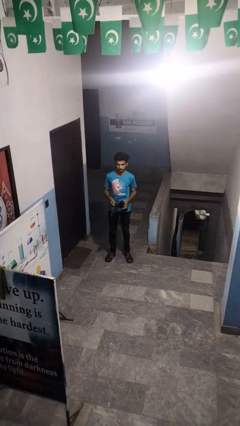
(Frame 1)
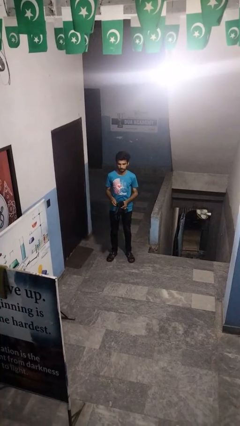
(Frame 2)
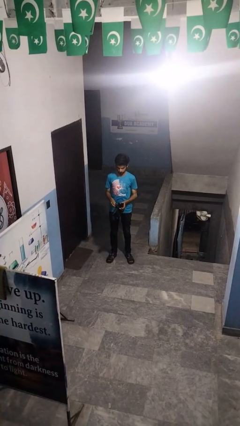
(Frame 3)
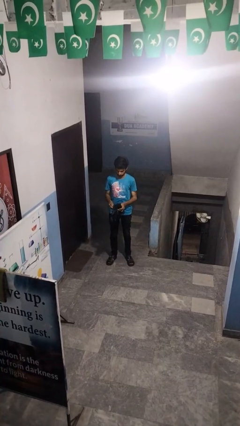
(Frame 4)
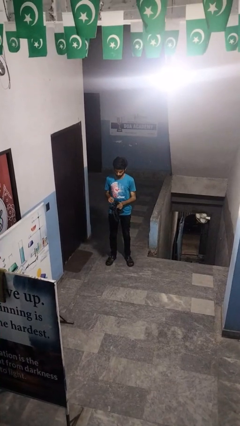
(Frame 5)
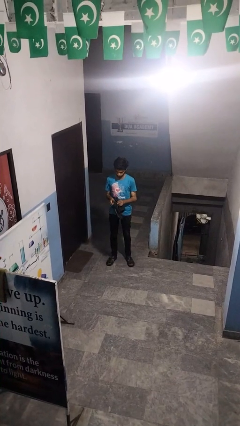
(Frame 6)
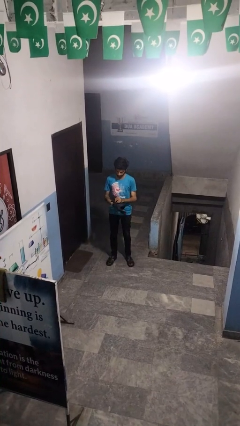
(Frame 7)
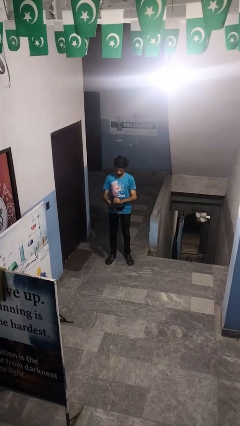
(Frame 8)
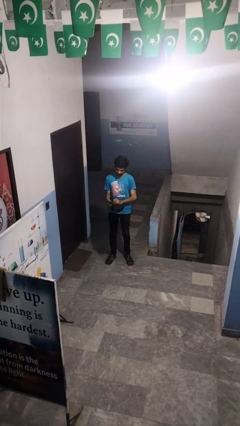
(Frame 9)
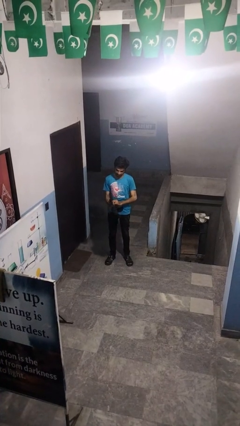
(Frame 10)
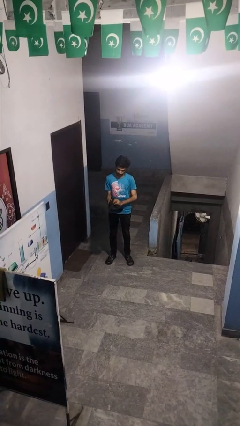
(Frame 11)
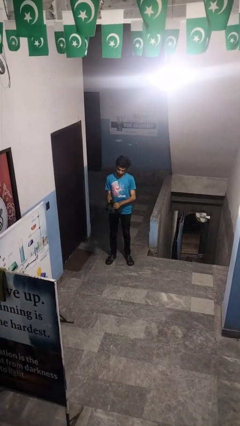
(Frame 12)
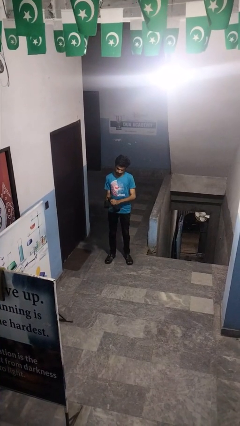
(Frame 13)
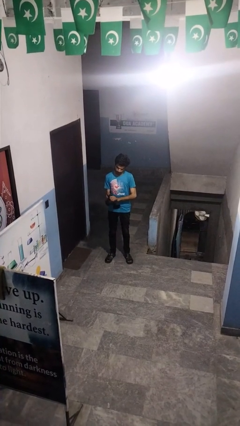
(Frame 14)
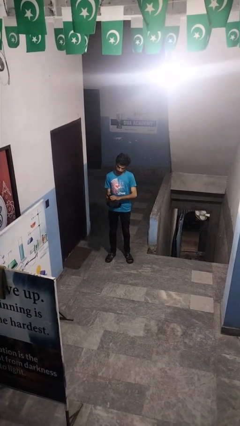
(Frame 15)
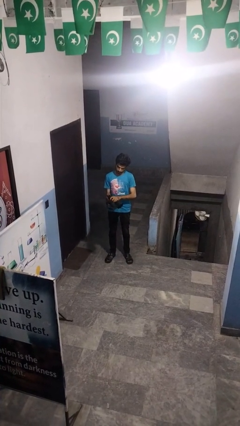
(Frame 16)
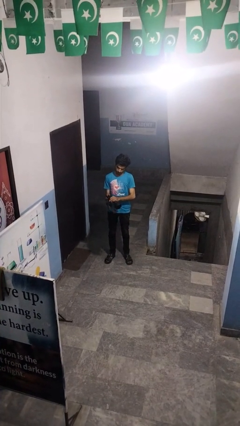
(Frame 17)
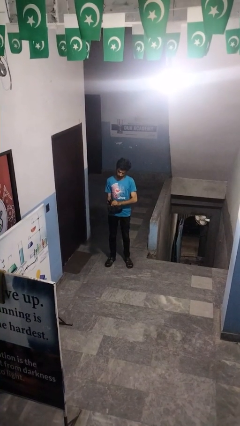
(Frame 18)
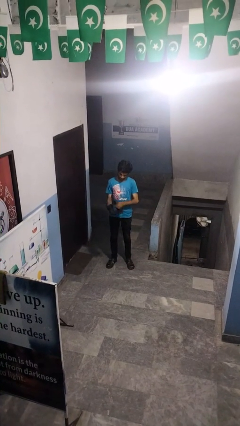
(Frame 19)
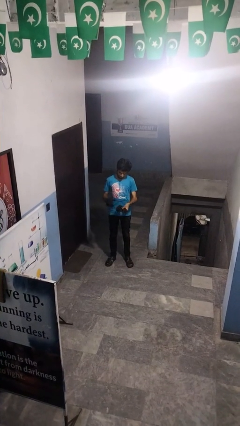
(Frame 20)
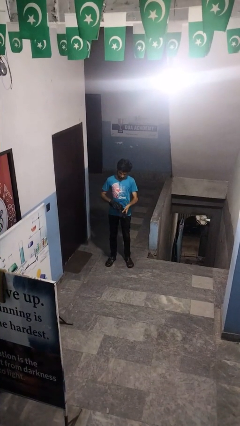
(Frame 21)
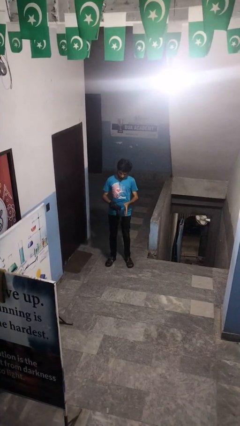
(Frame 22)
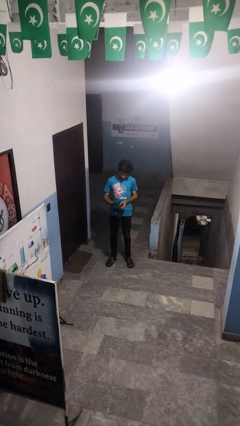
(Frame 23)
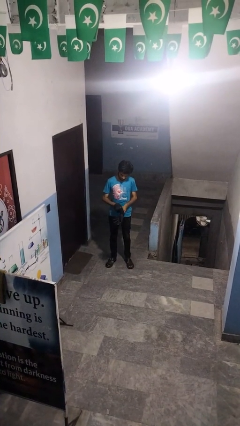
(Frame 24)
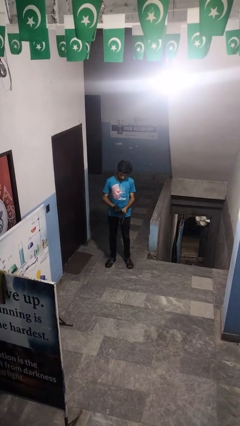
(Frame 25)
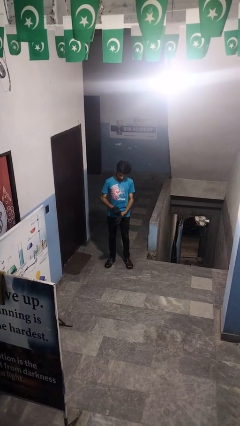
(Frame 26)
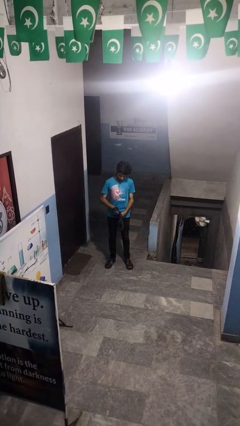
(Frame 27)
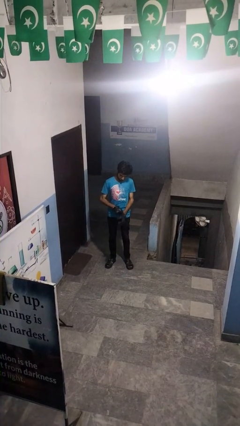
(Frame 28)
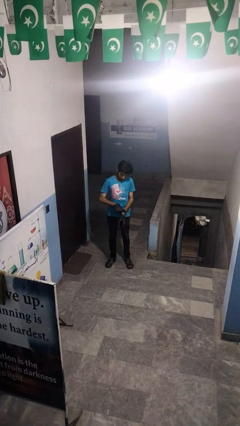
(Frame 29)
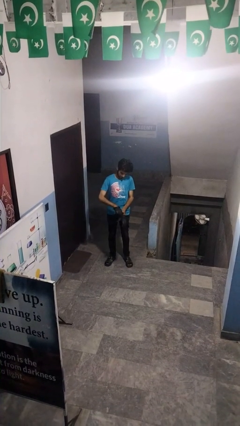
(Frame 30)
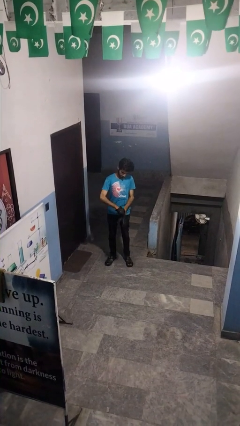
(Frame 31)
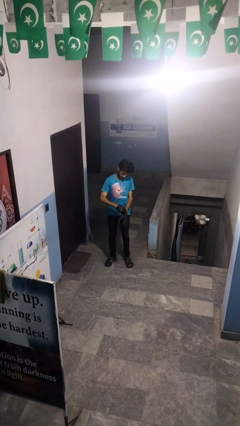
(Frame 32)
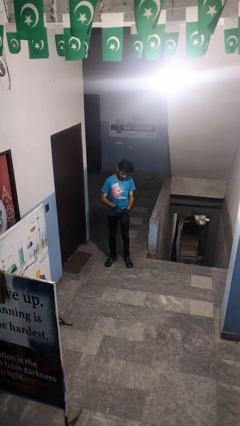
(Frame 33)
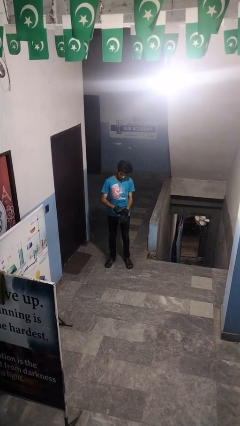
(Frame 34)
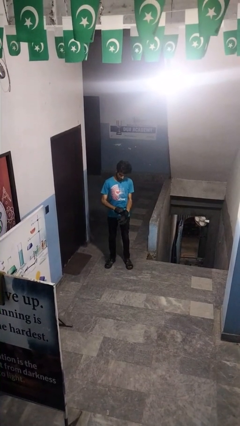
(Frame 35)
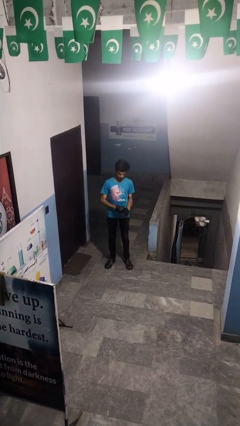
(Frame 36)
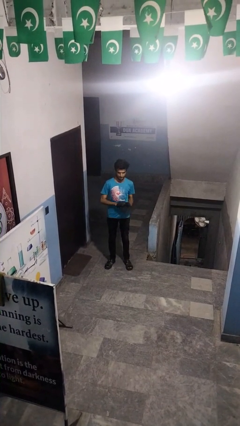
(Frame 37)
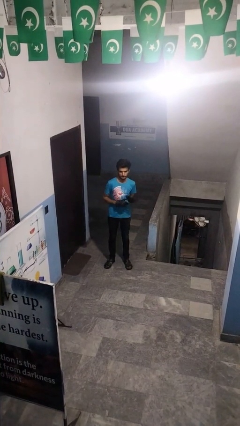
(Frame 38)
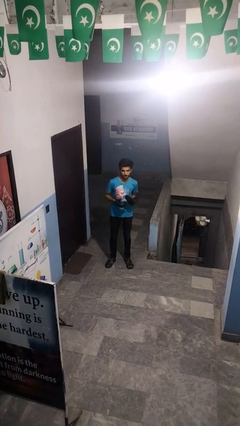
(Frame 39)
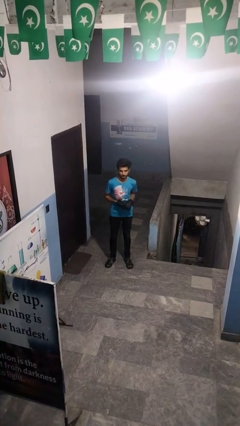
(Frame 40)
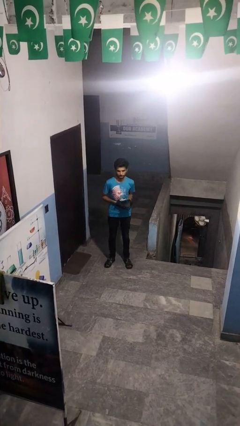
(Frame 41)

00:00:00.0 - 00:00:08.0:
person puts on gloves

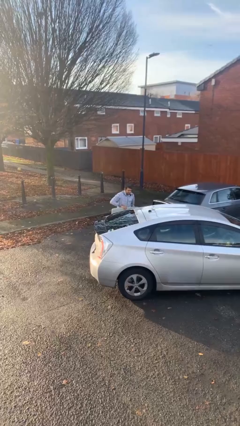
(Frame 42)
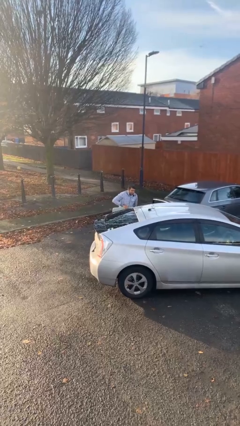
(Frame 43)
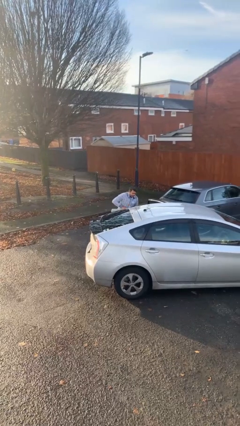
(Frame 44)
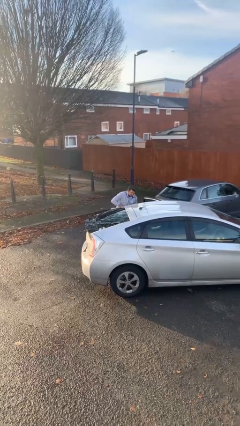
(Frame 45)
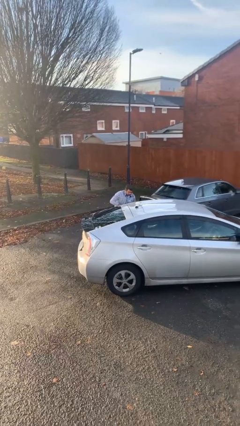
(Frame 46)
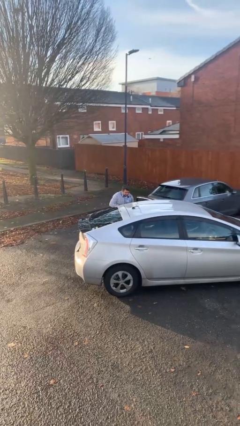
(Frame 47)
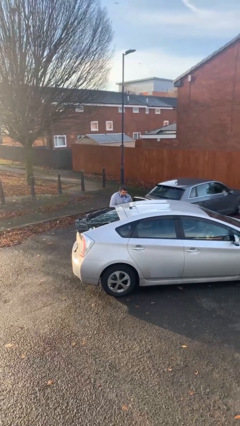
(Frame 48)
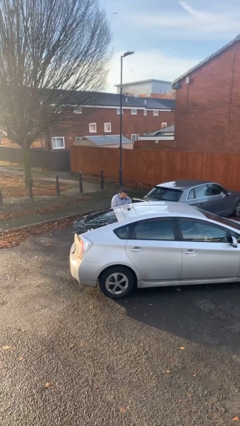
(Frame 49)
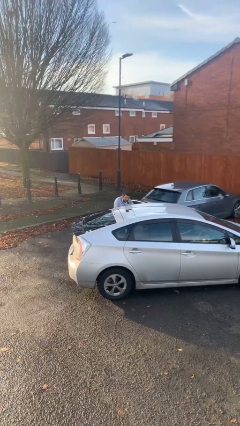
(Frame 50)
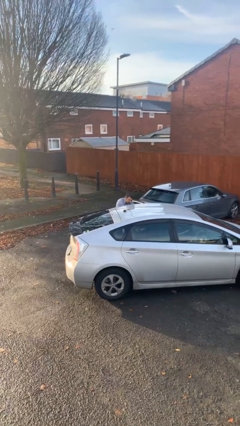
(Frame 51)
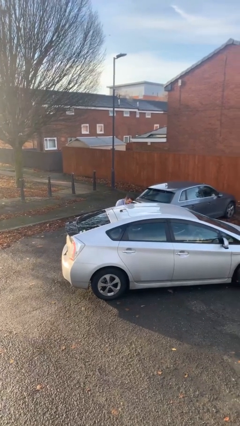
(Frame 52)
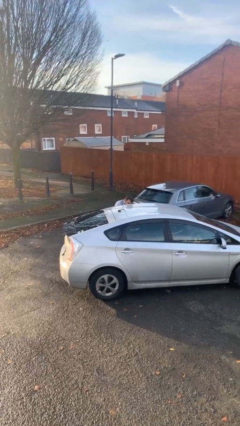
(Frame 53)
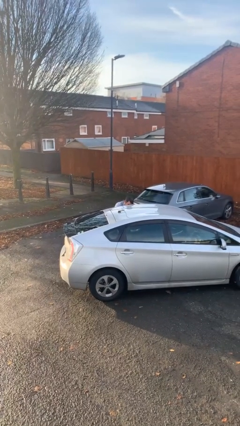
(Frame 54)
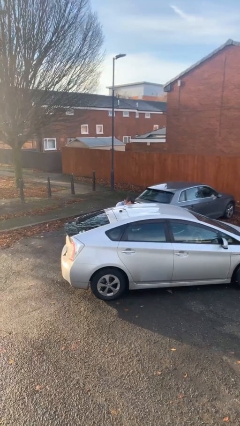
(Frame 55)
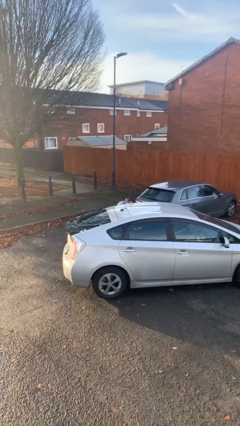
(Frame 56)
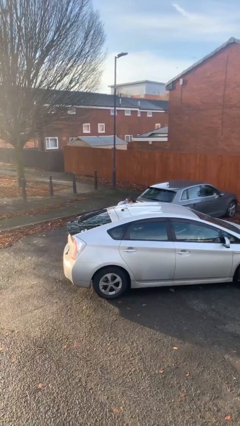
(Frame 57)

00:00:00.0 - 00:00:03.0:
person loads car

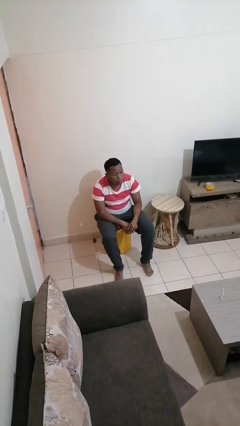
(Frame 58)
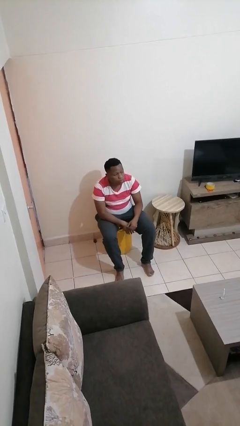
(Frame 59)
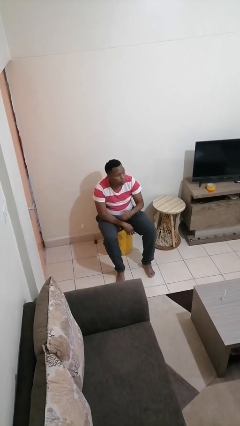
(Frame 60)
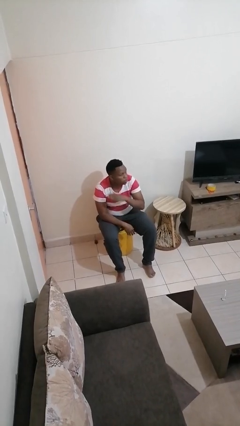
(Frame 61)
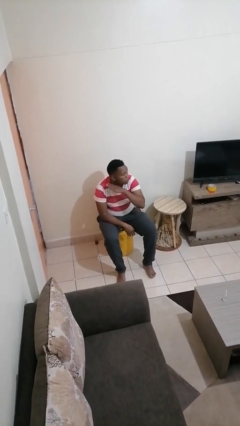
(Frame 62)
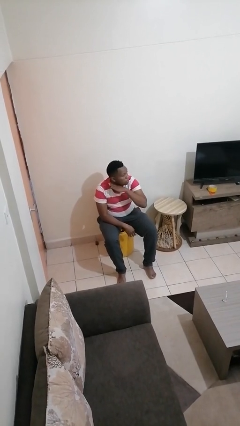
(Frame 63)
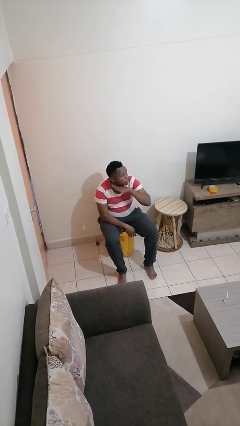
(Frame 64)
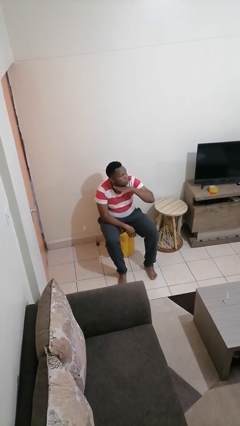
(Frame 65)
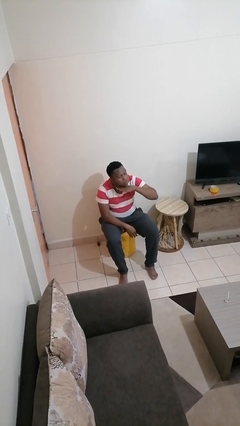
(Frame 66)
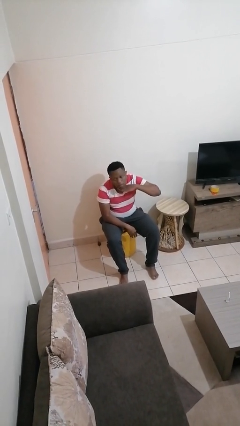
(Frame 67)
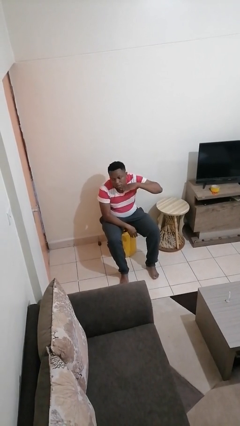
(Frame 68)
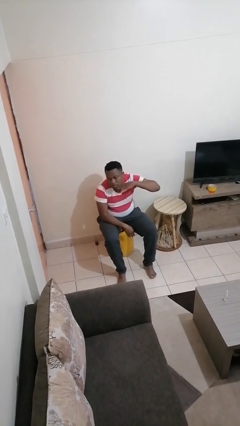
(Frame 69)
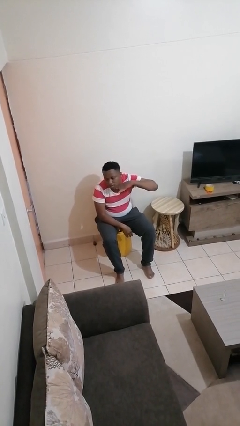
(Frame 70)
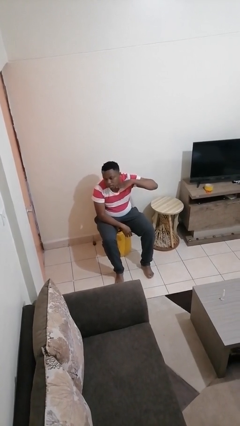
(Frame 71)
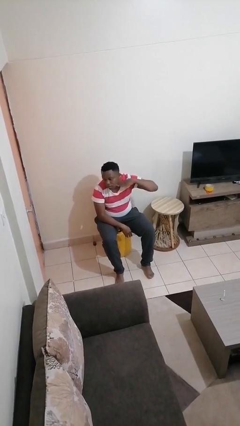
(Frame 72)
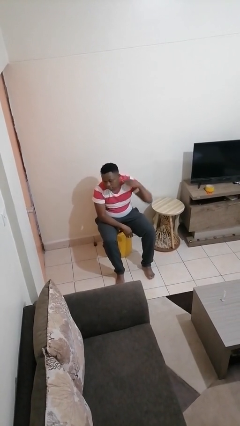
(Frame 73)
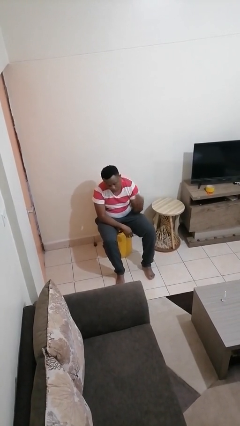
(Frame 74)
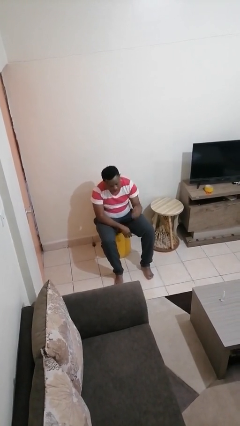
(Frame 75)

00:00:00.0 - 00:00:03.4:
person gestures cut

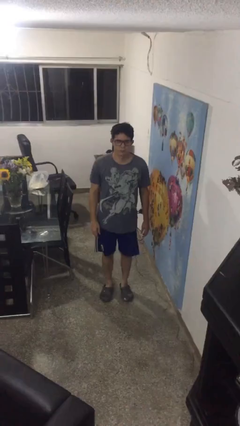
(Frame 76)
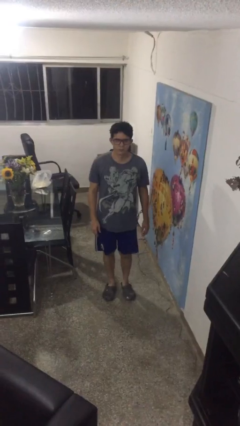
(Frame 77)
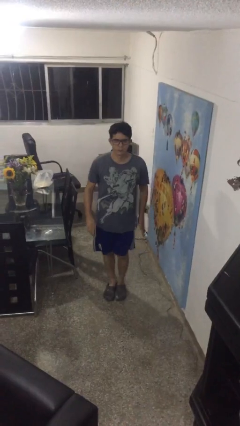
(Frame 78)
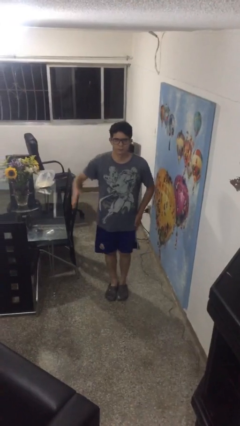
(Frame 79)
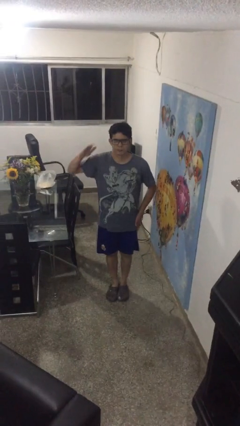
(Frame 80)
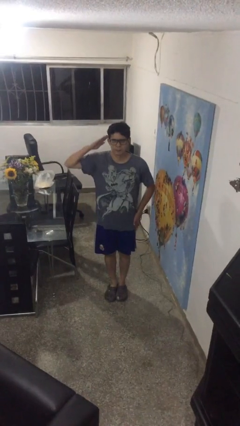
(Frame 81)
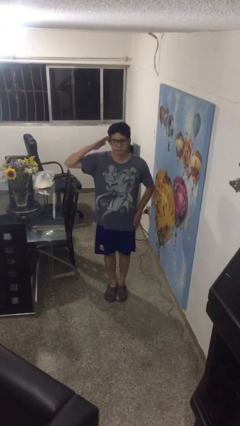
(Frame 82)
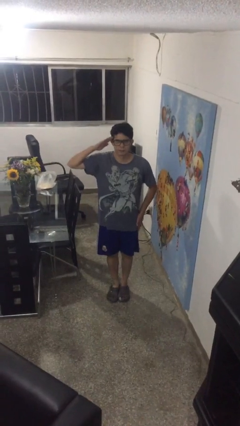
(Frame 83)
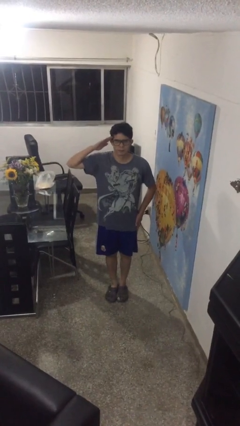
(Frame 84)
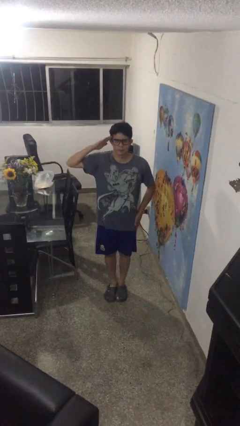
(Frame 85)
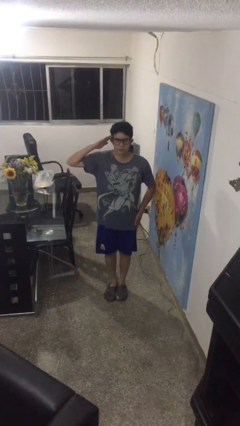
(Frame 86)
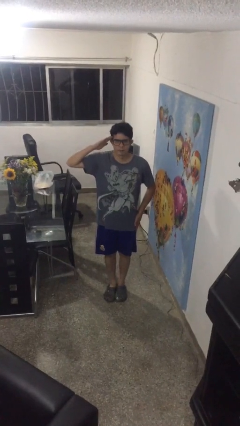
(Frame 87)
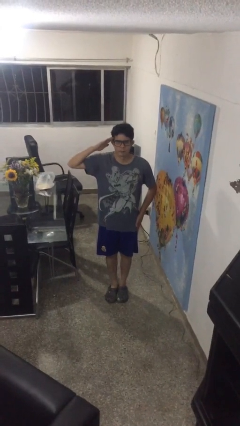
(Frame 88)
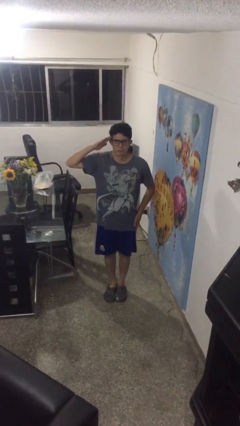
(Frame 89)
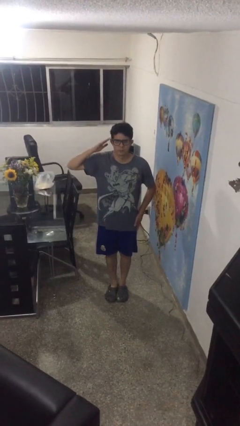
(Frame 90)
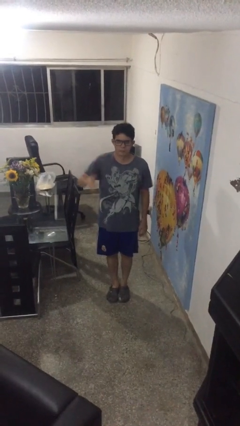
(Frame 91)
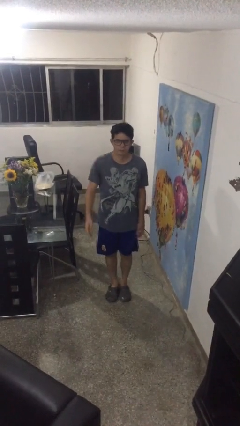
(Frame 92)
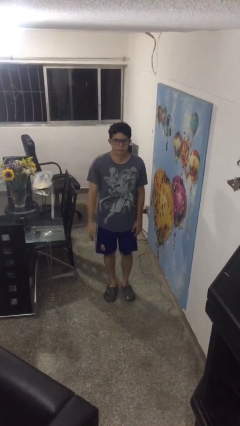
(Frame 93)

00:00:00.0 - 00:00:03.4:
person salutes
